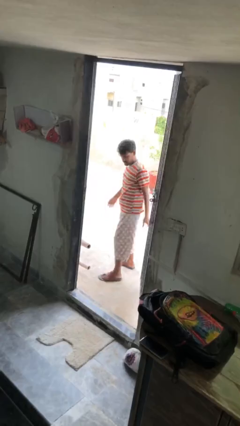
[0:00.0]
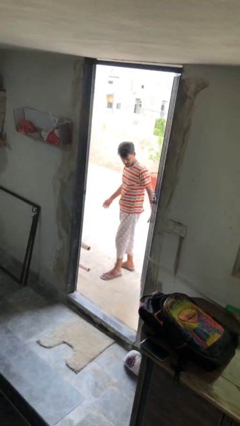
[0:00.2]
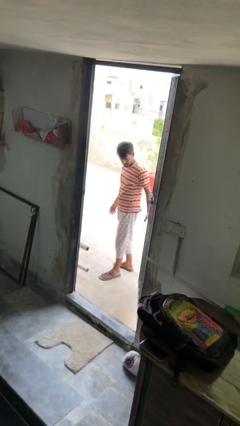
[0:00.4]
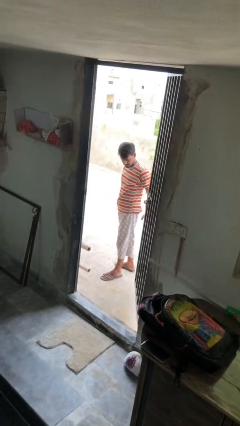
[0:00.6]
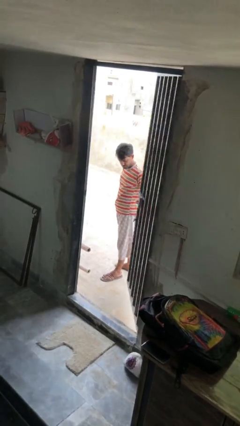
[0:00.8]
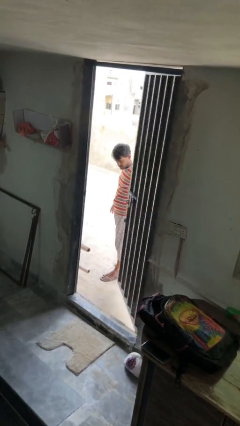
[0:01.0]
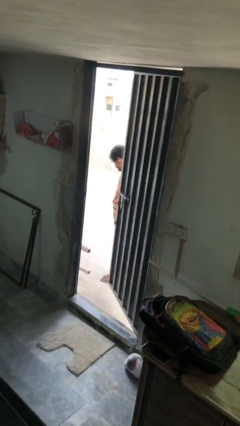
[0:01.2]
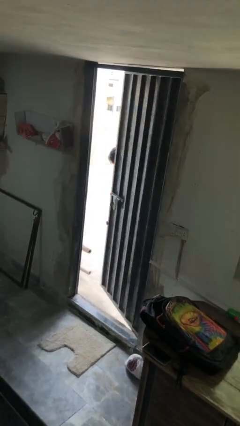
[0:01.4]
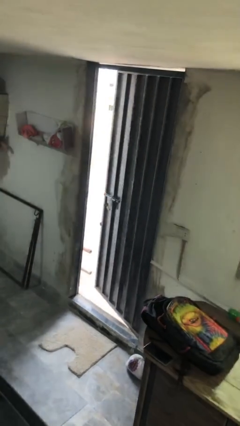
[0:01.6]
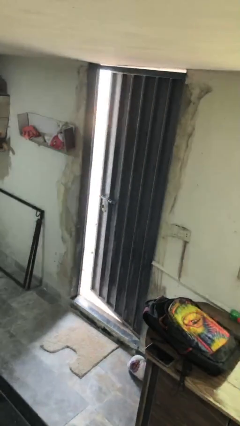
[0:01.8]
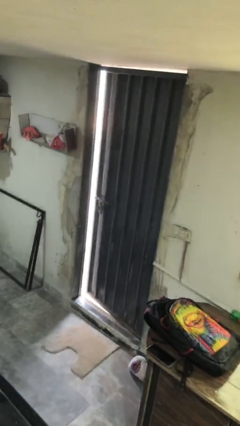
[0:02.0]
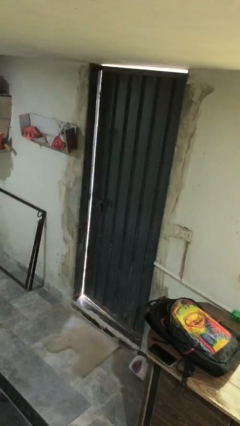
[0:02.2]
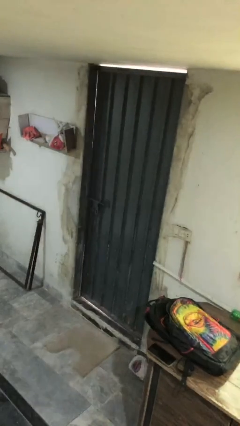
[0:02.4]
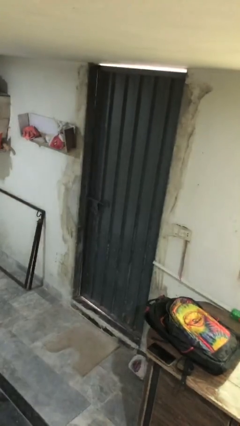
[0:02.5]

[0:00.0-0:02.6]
person closes facility door

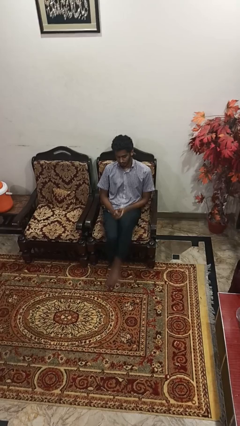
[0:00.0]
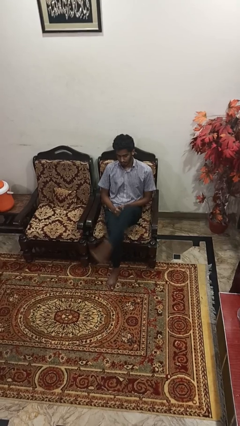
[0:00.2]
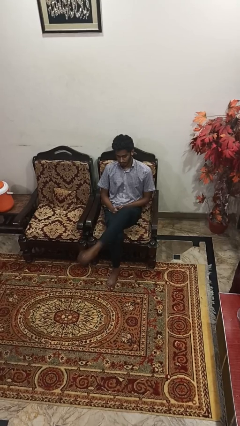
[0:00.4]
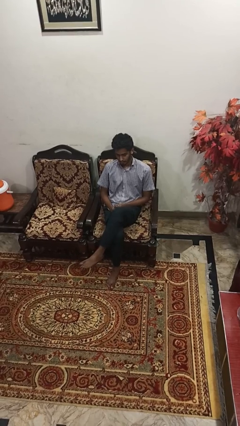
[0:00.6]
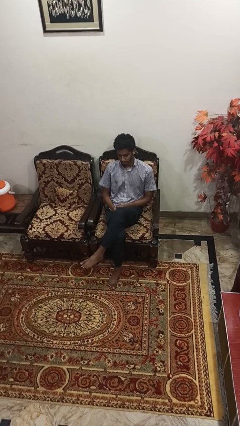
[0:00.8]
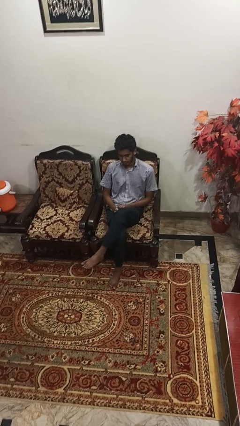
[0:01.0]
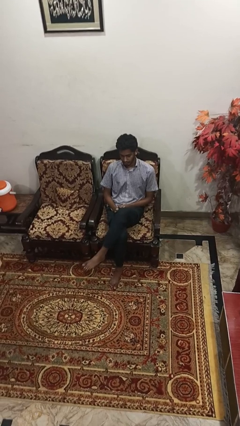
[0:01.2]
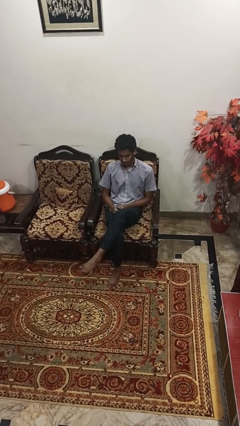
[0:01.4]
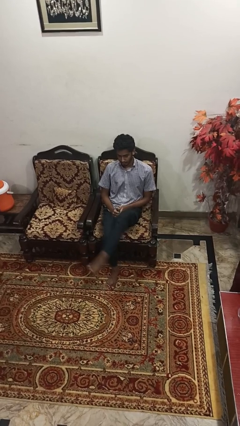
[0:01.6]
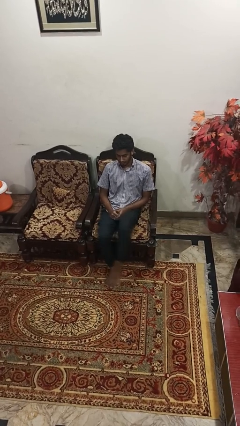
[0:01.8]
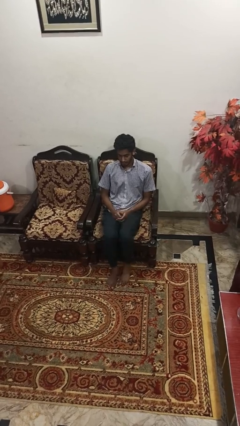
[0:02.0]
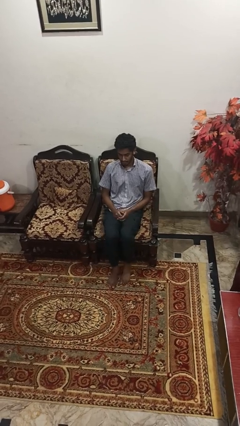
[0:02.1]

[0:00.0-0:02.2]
person crosses legs

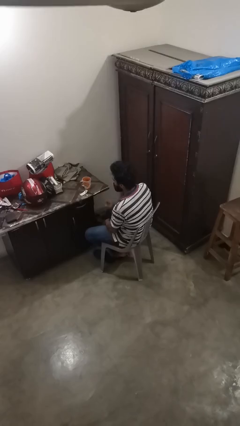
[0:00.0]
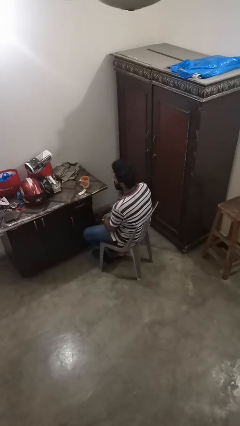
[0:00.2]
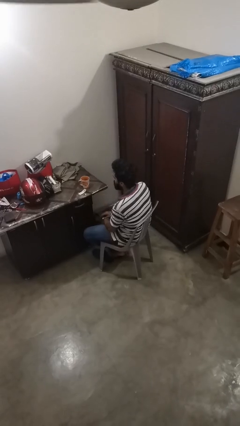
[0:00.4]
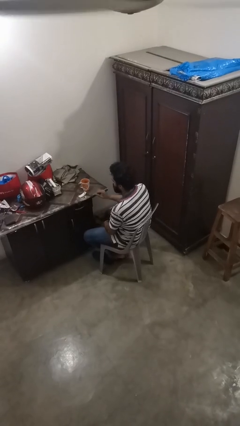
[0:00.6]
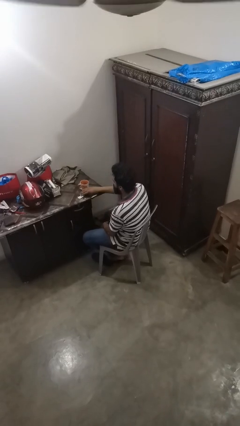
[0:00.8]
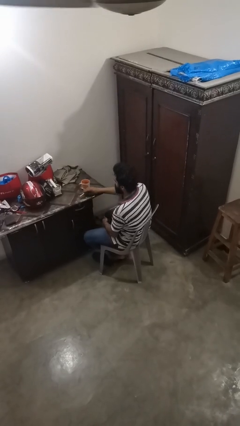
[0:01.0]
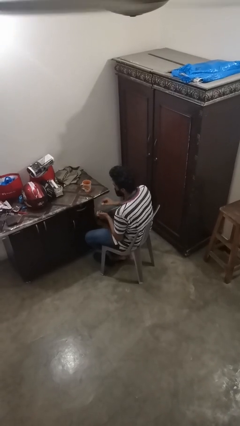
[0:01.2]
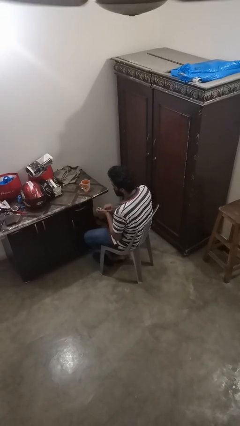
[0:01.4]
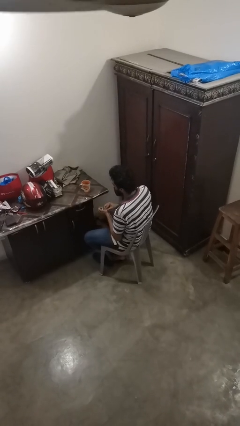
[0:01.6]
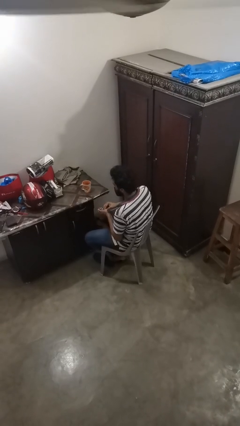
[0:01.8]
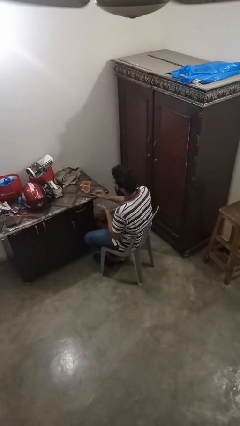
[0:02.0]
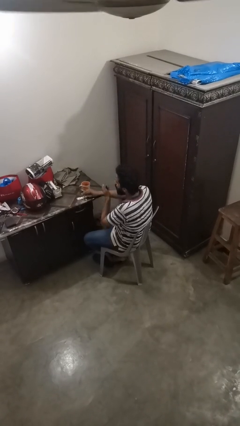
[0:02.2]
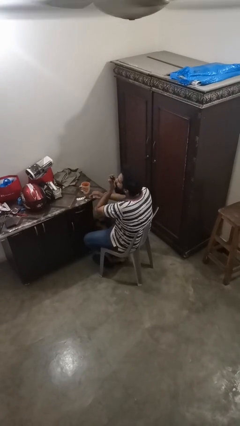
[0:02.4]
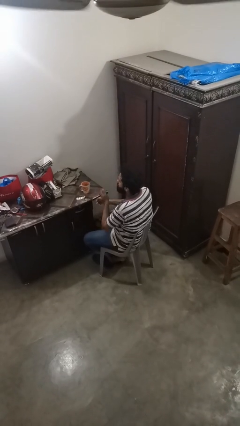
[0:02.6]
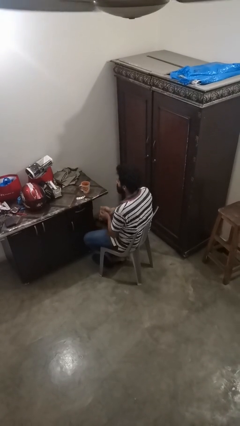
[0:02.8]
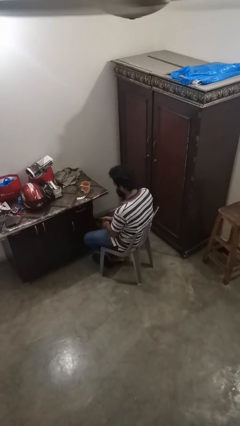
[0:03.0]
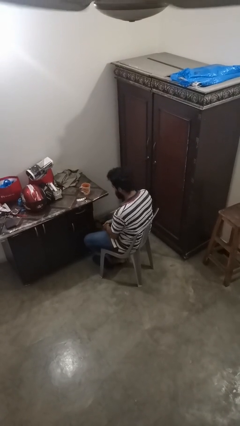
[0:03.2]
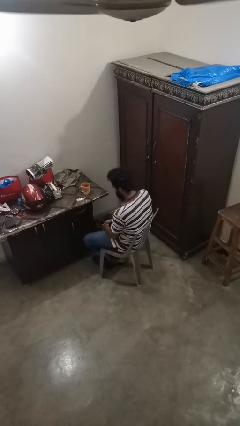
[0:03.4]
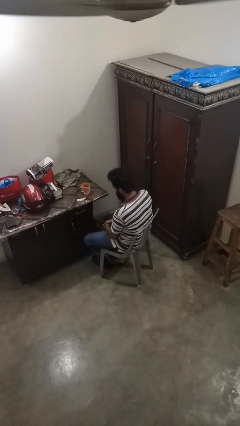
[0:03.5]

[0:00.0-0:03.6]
person takes medicine pills

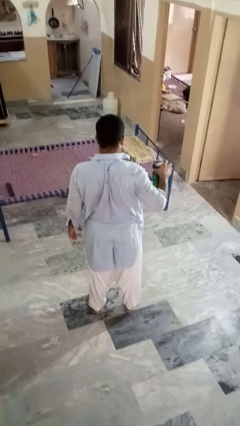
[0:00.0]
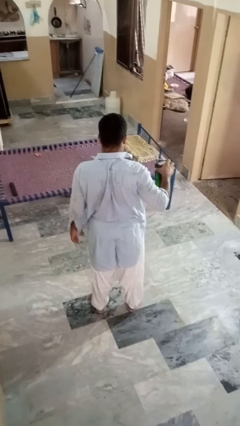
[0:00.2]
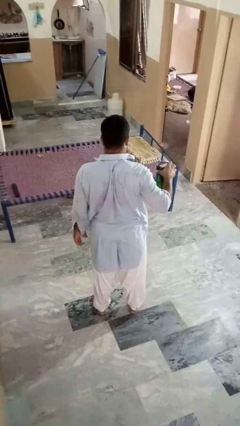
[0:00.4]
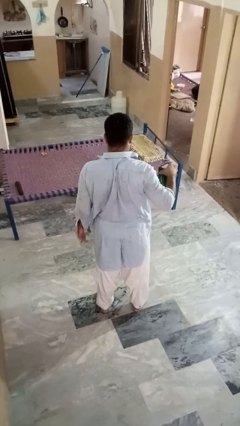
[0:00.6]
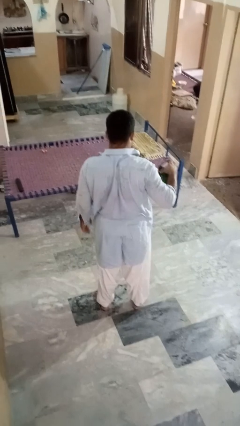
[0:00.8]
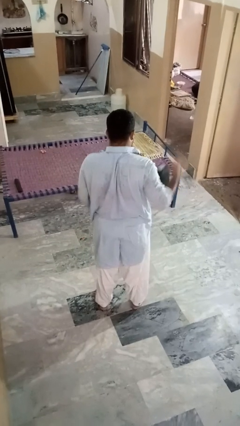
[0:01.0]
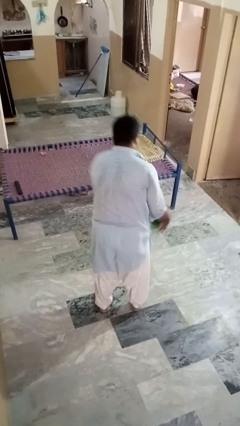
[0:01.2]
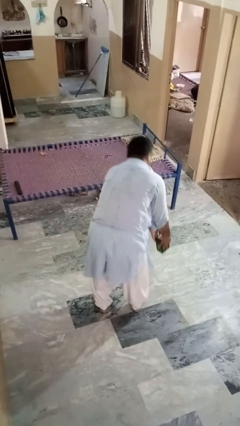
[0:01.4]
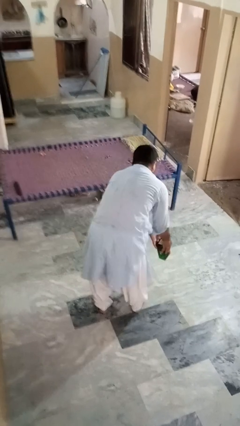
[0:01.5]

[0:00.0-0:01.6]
person drops object

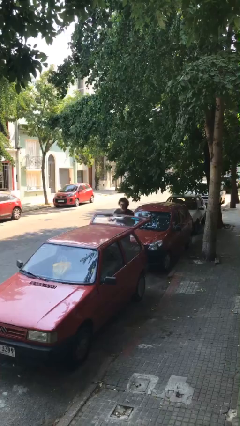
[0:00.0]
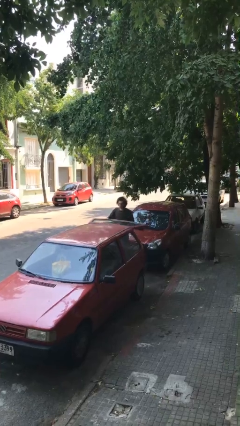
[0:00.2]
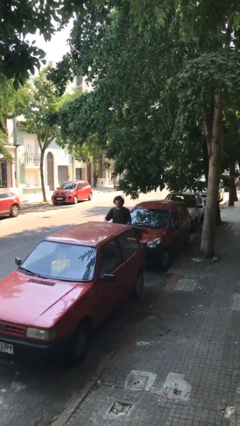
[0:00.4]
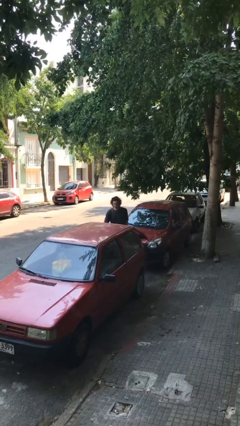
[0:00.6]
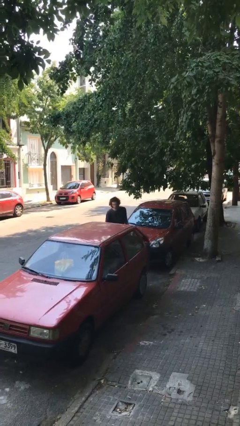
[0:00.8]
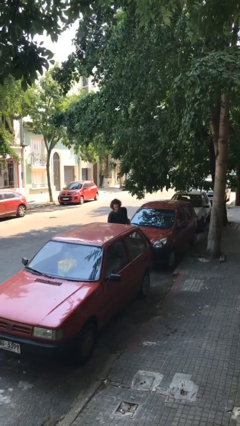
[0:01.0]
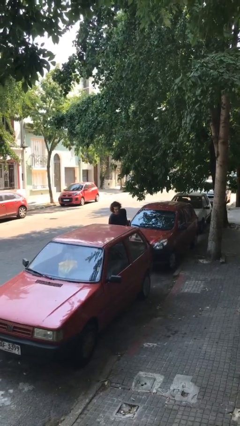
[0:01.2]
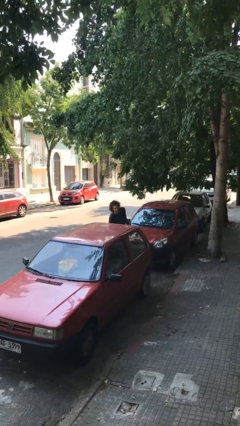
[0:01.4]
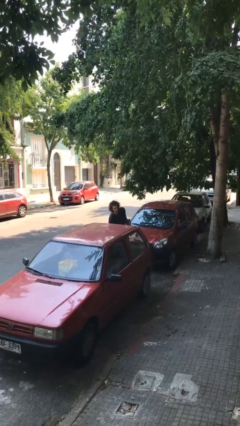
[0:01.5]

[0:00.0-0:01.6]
person closes car trunk

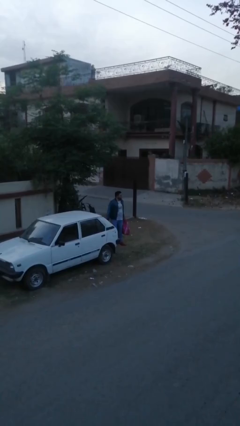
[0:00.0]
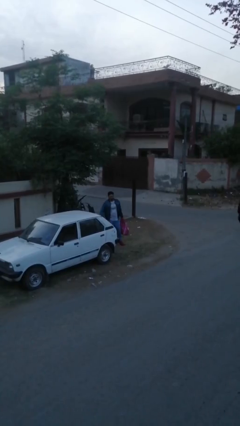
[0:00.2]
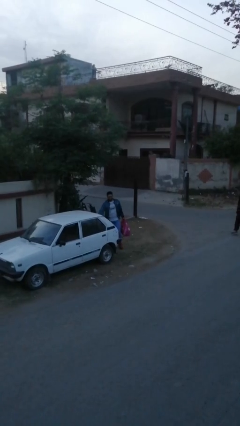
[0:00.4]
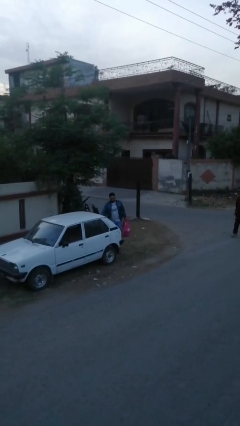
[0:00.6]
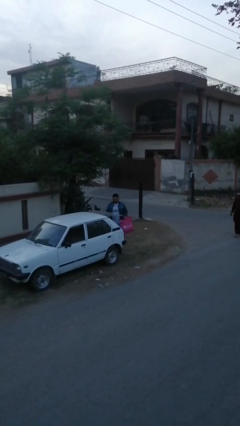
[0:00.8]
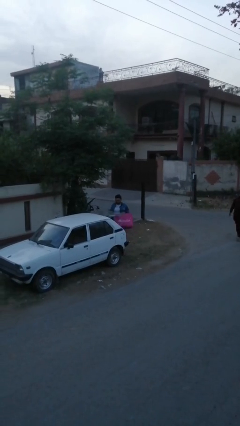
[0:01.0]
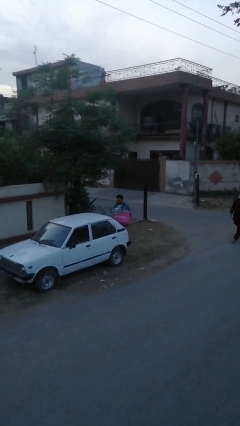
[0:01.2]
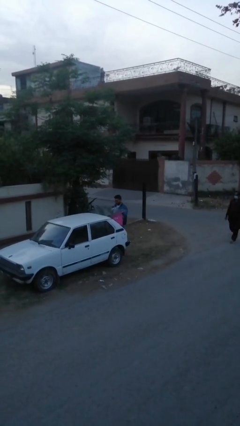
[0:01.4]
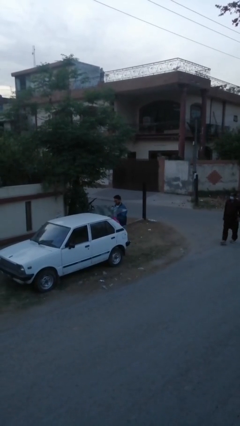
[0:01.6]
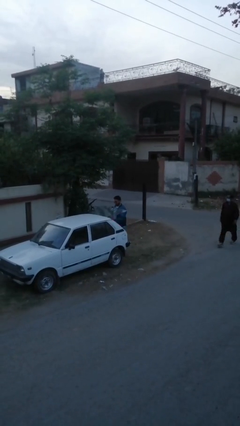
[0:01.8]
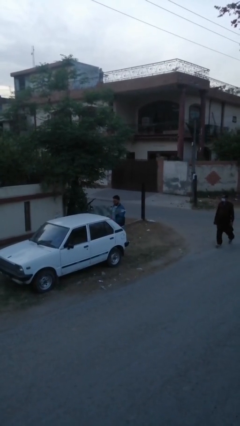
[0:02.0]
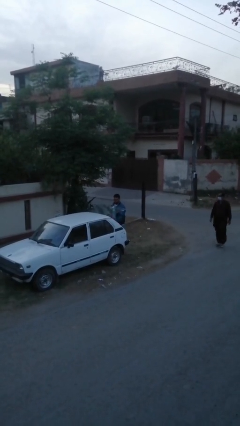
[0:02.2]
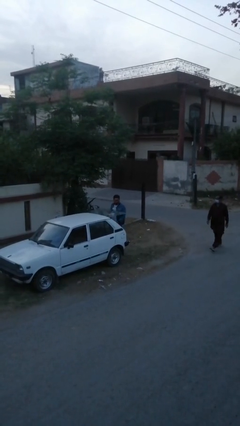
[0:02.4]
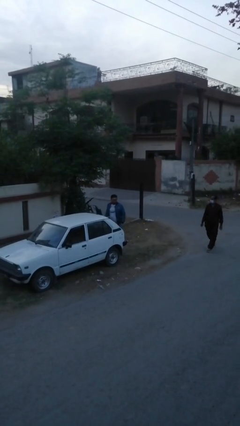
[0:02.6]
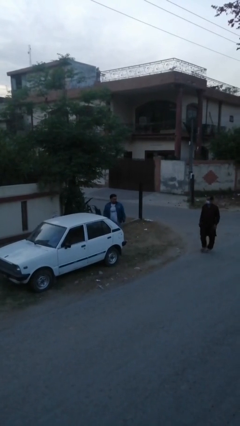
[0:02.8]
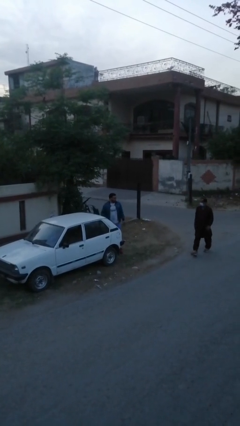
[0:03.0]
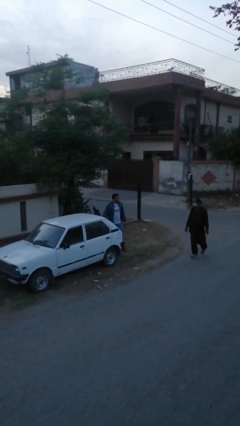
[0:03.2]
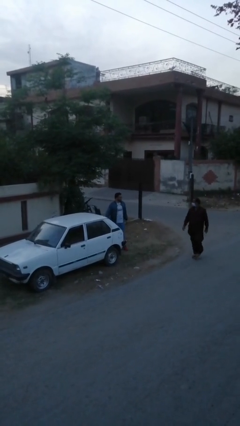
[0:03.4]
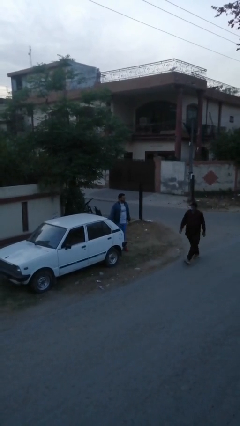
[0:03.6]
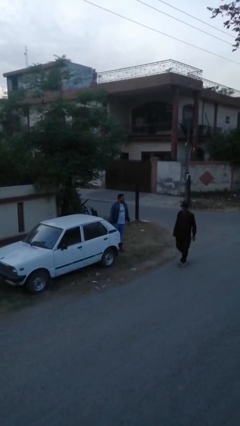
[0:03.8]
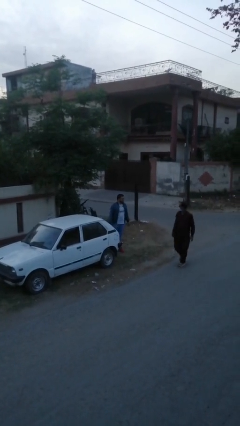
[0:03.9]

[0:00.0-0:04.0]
person loads car

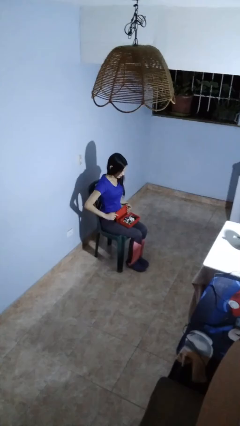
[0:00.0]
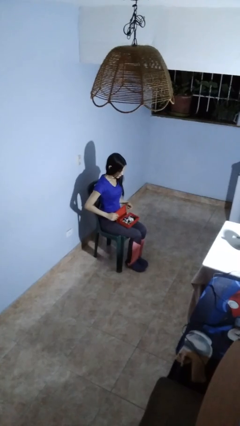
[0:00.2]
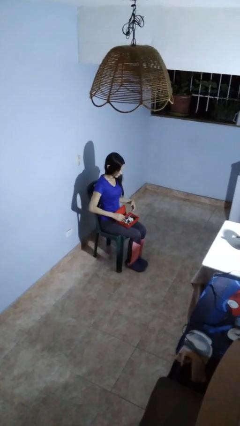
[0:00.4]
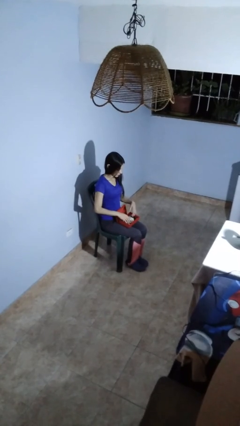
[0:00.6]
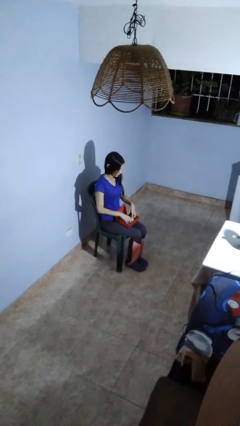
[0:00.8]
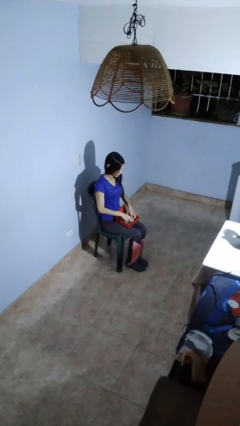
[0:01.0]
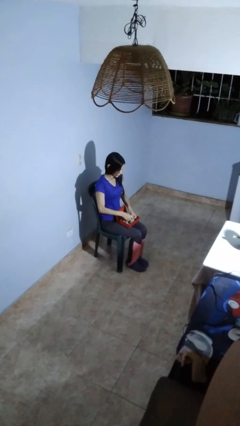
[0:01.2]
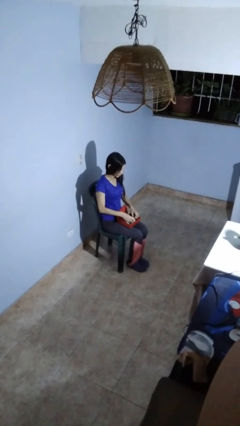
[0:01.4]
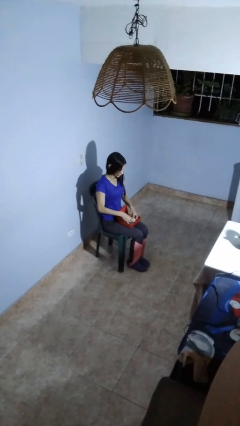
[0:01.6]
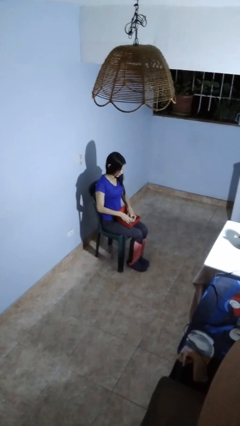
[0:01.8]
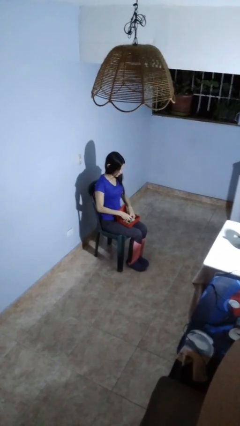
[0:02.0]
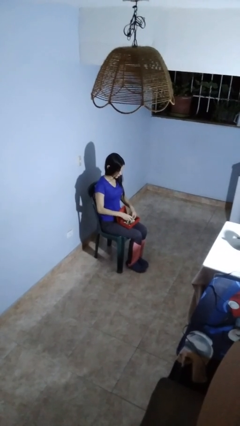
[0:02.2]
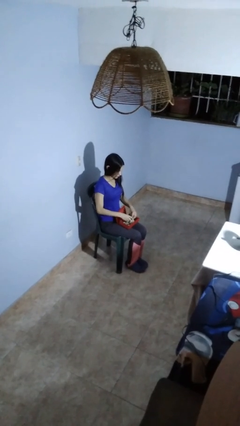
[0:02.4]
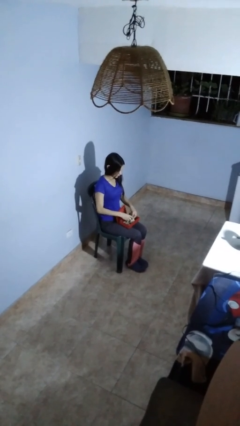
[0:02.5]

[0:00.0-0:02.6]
person searches jewelry box
